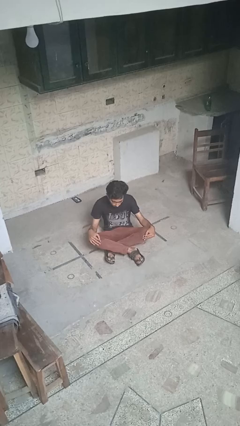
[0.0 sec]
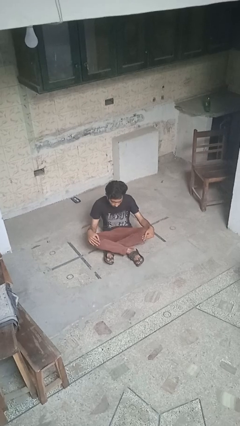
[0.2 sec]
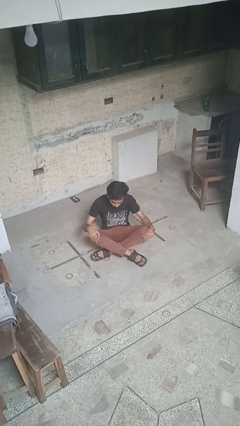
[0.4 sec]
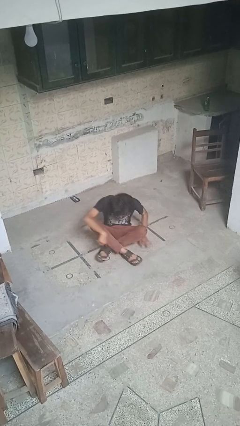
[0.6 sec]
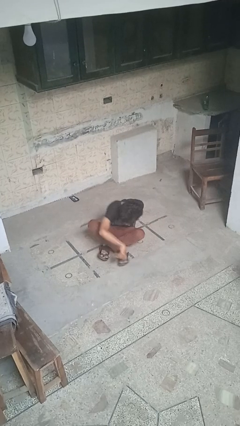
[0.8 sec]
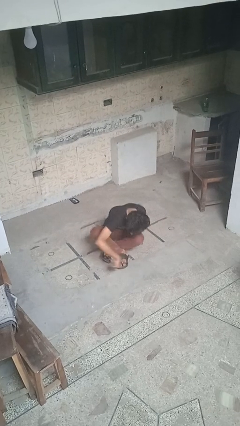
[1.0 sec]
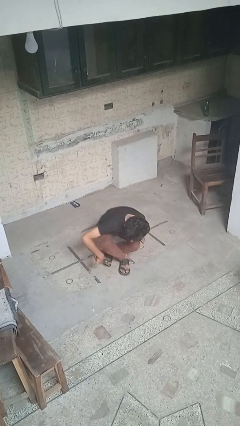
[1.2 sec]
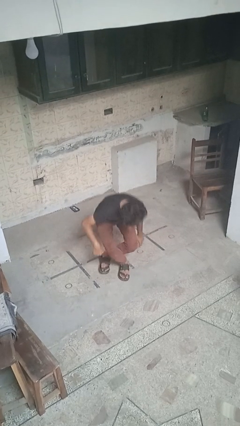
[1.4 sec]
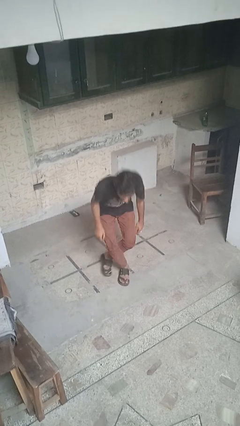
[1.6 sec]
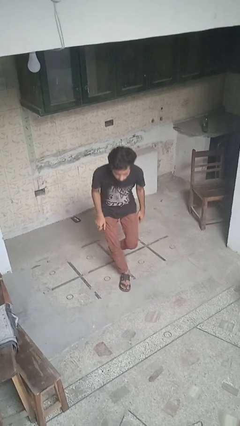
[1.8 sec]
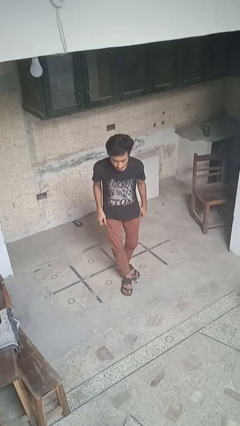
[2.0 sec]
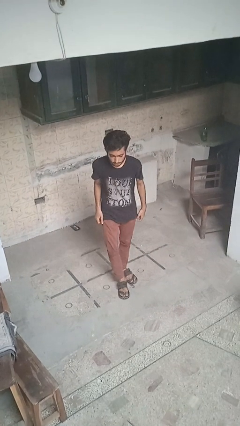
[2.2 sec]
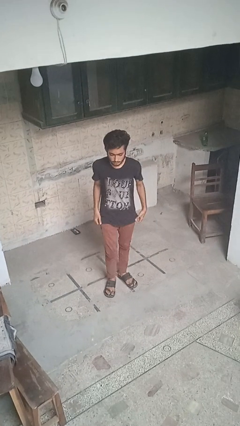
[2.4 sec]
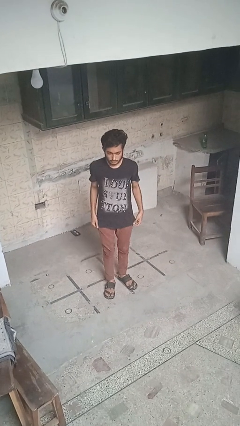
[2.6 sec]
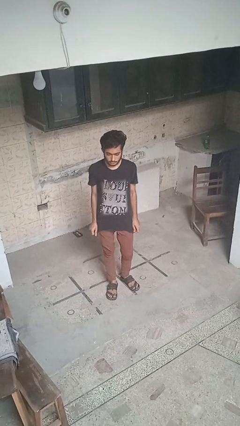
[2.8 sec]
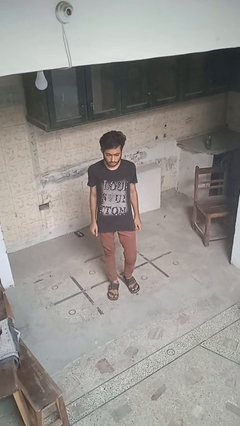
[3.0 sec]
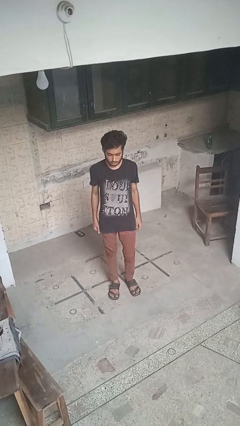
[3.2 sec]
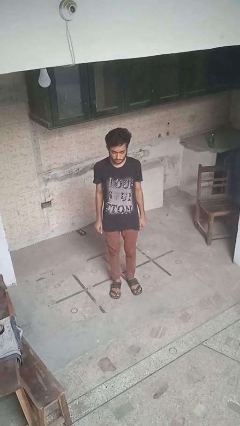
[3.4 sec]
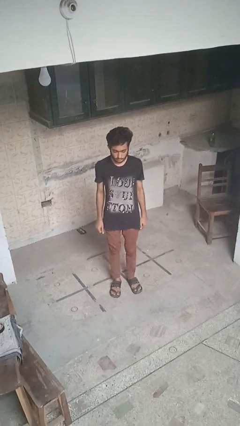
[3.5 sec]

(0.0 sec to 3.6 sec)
person stands up from floor

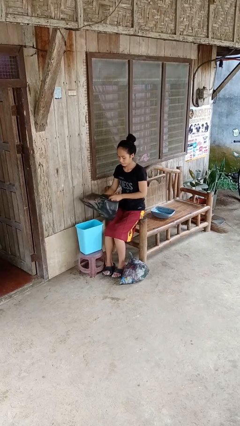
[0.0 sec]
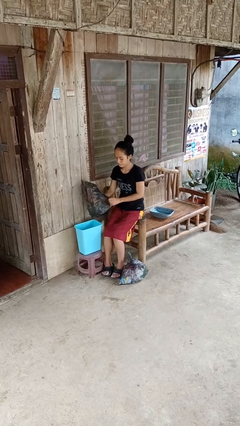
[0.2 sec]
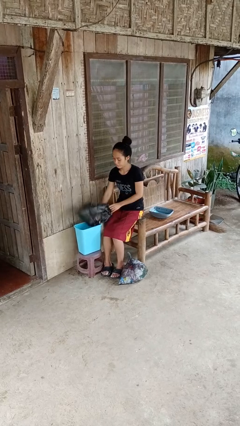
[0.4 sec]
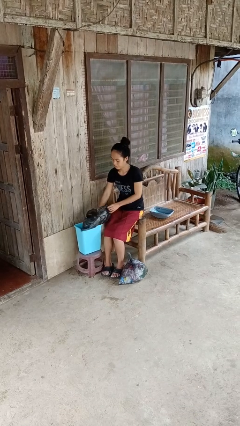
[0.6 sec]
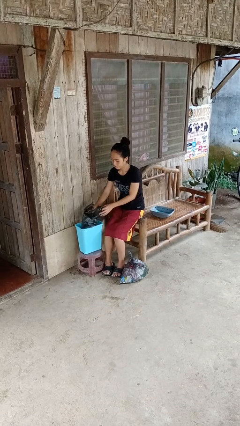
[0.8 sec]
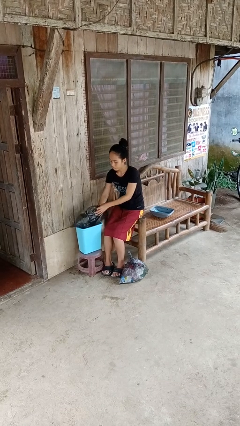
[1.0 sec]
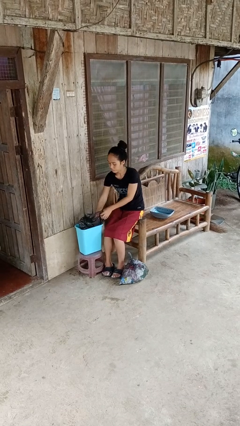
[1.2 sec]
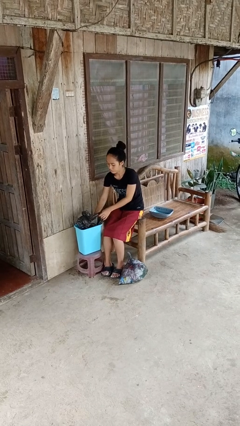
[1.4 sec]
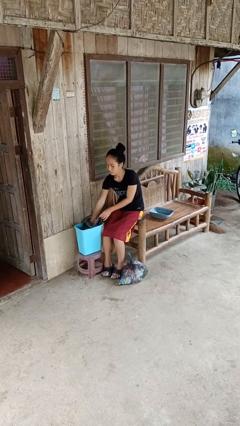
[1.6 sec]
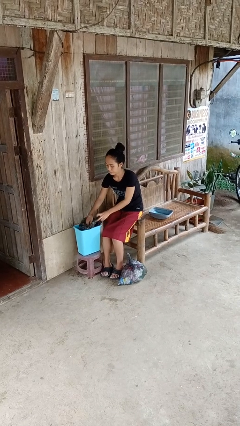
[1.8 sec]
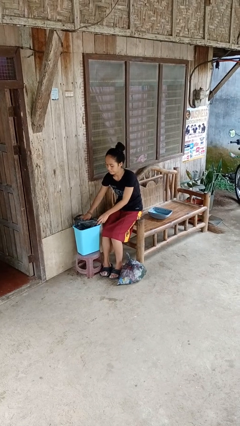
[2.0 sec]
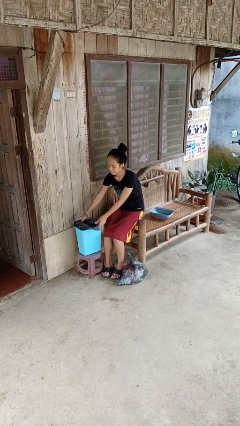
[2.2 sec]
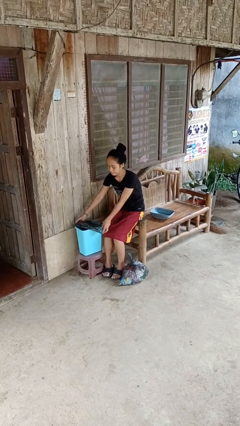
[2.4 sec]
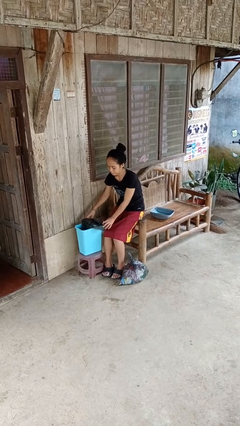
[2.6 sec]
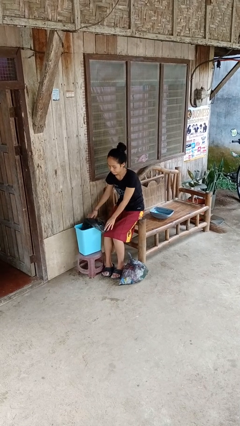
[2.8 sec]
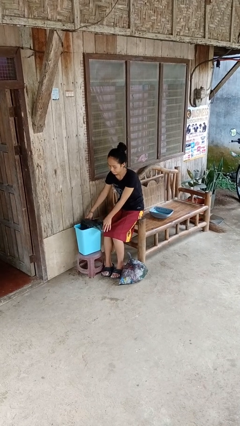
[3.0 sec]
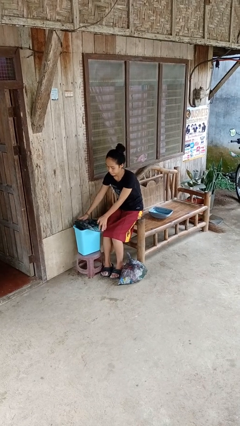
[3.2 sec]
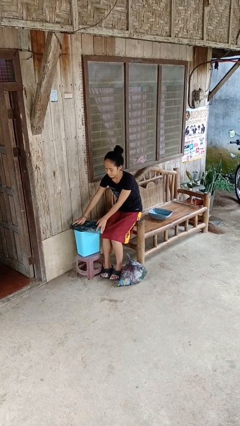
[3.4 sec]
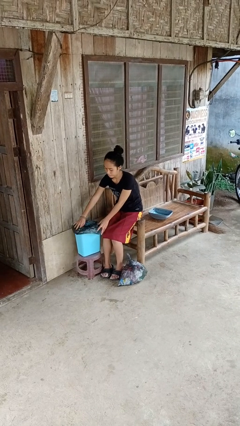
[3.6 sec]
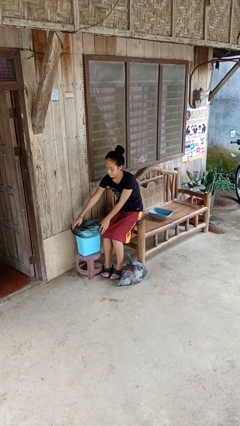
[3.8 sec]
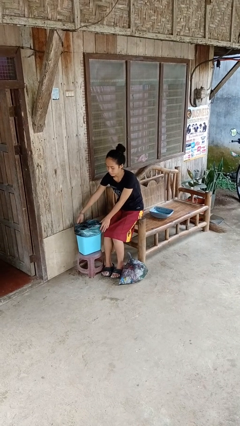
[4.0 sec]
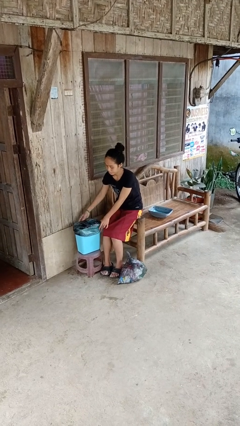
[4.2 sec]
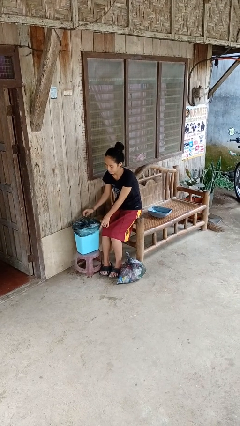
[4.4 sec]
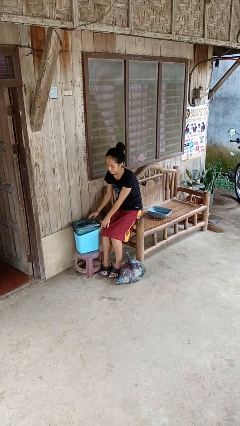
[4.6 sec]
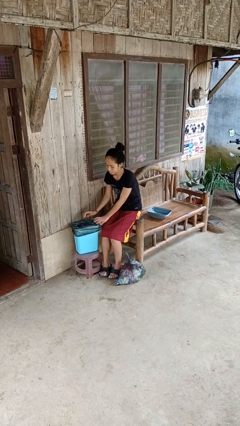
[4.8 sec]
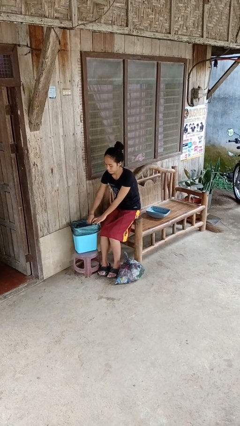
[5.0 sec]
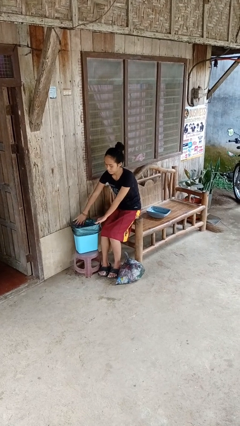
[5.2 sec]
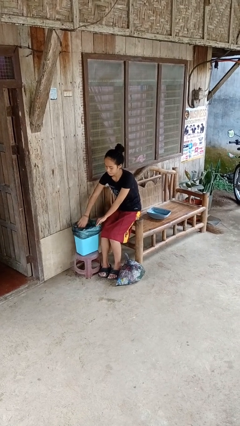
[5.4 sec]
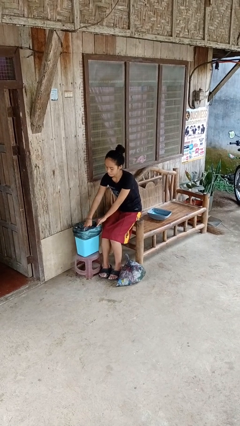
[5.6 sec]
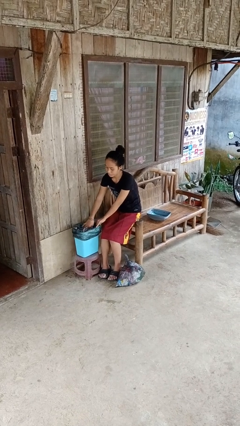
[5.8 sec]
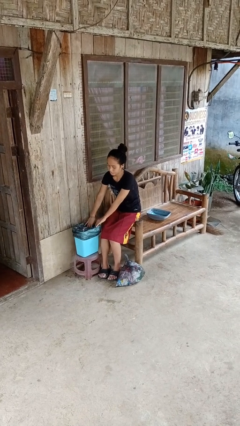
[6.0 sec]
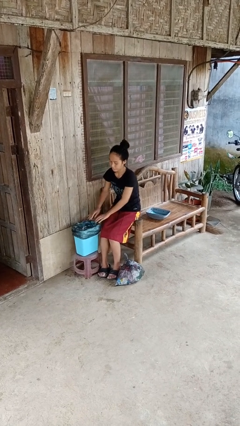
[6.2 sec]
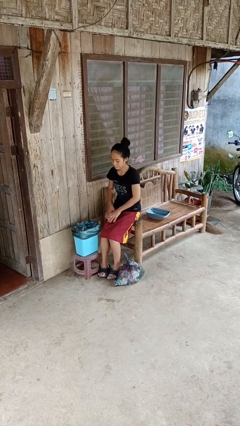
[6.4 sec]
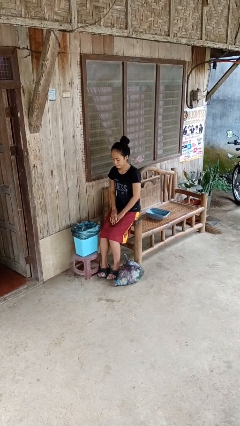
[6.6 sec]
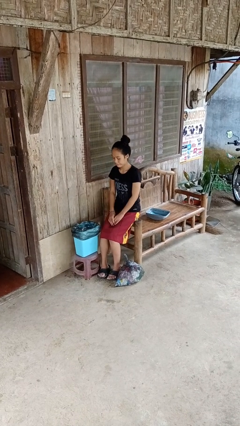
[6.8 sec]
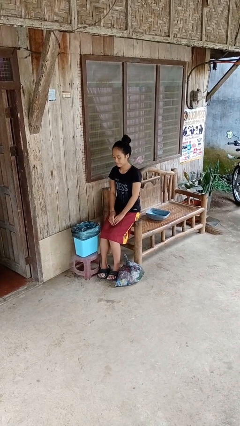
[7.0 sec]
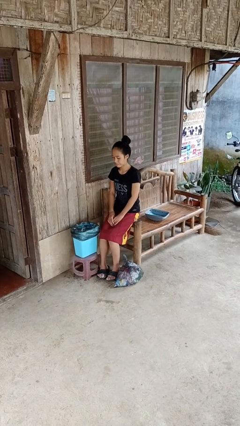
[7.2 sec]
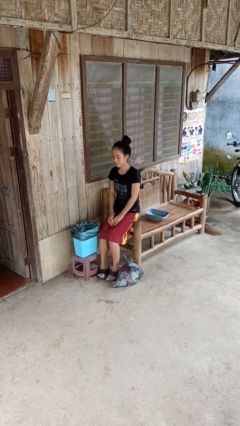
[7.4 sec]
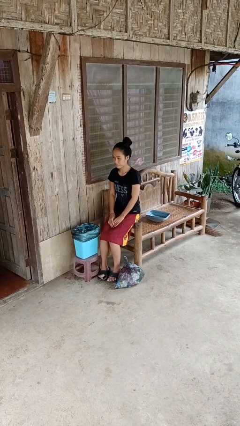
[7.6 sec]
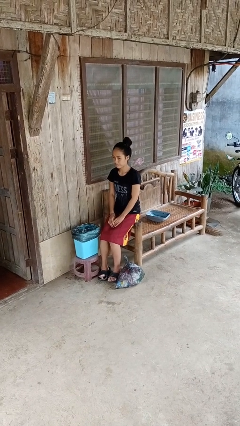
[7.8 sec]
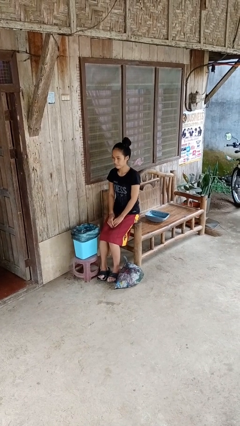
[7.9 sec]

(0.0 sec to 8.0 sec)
person inserts trashbag into trashcan

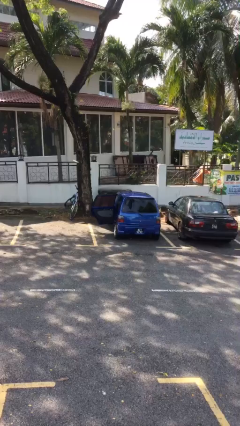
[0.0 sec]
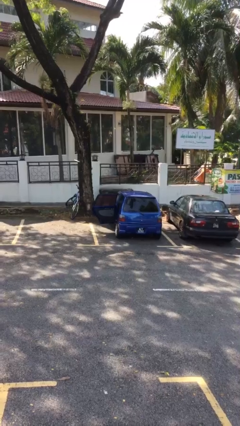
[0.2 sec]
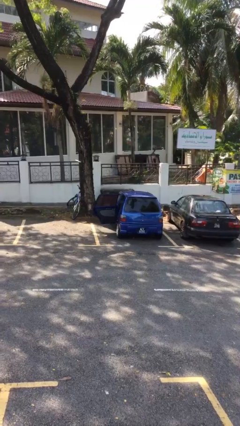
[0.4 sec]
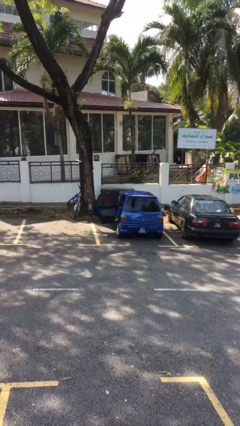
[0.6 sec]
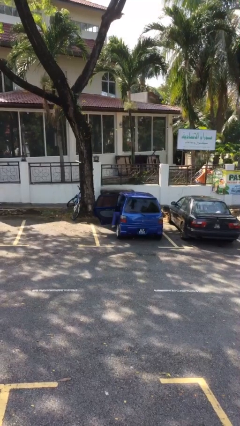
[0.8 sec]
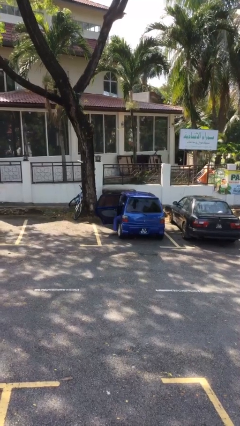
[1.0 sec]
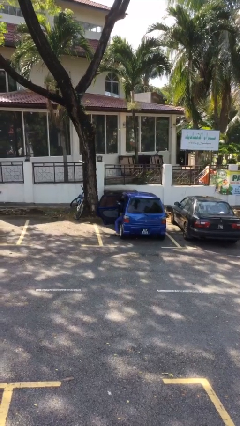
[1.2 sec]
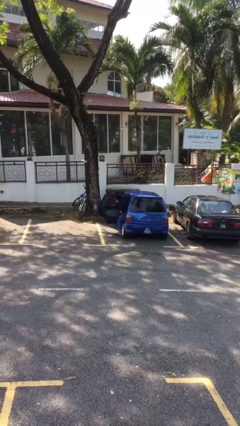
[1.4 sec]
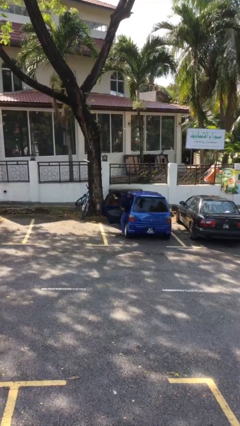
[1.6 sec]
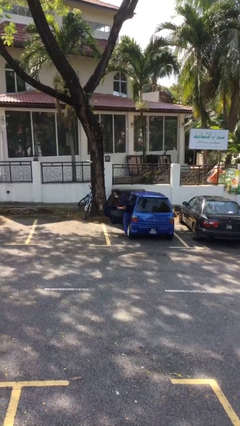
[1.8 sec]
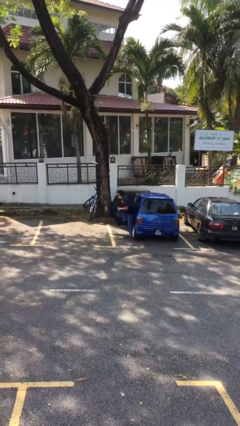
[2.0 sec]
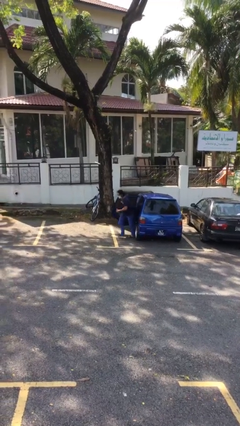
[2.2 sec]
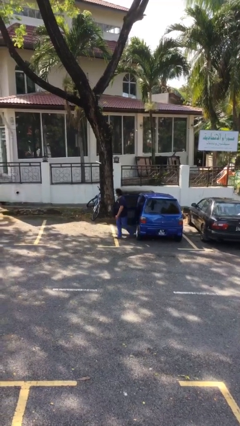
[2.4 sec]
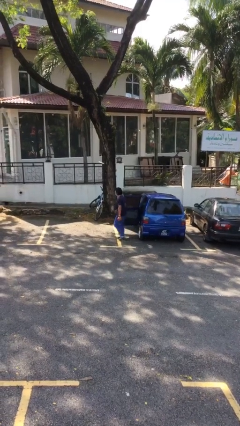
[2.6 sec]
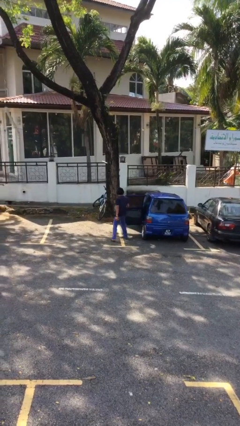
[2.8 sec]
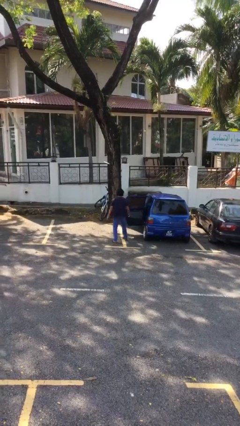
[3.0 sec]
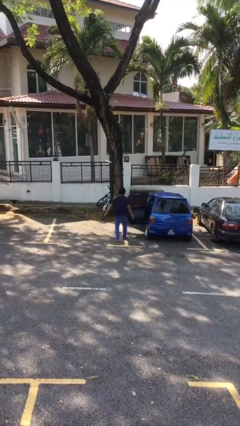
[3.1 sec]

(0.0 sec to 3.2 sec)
person exits car

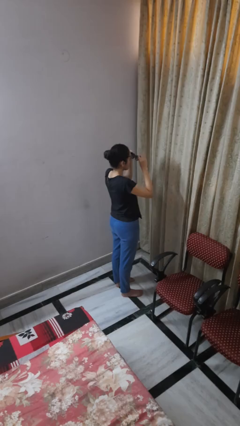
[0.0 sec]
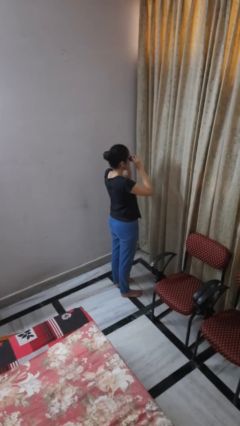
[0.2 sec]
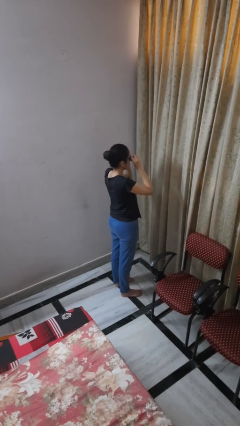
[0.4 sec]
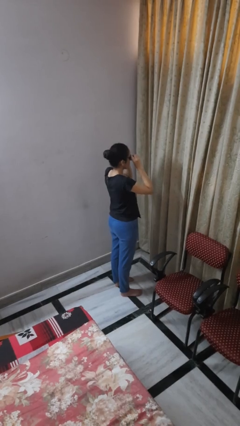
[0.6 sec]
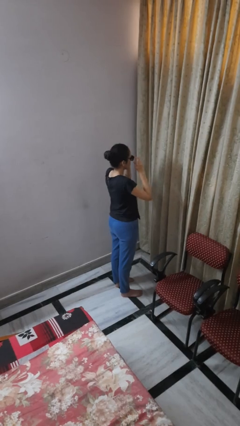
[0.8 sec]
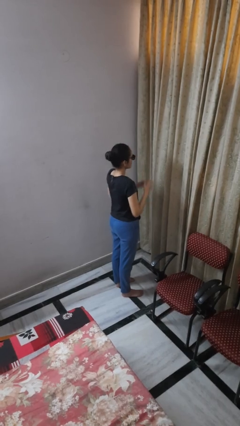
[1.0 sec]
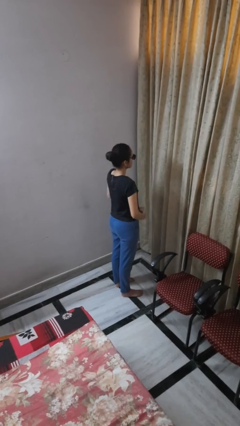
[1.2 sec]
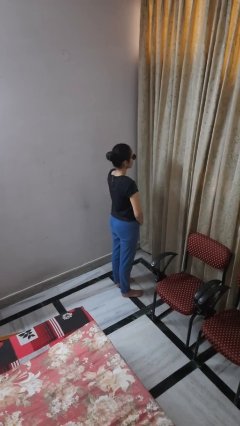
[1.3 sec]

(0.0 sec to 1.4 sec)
person puts on sunglasses

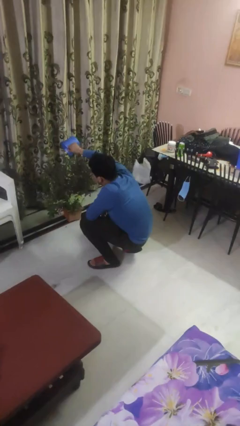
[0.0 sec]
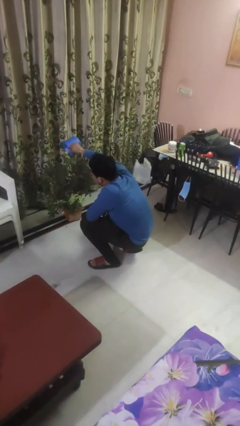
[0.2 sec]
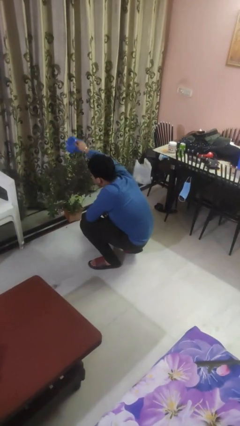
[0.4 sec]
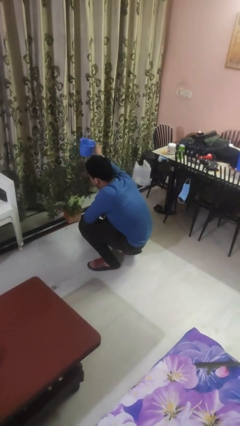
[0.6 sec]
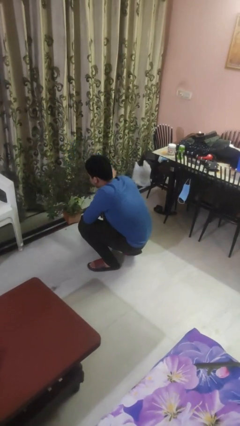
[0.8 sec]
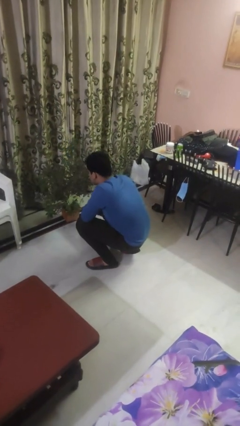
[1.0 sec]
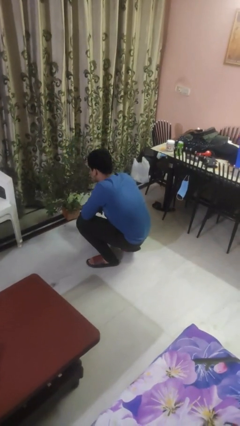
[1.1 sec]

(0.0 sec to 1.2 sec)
person waters houseplant

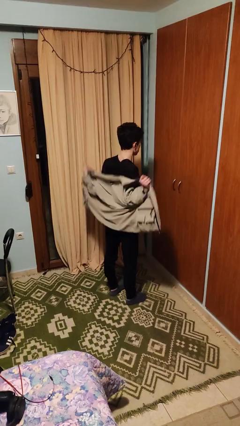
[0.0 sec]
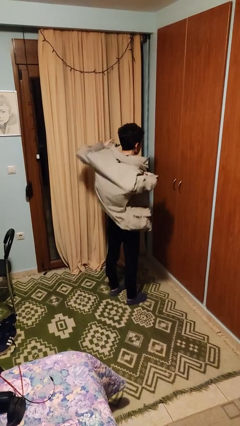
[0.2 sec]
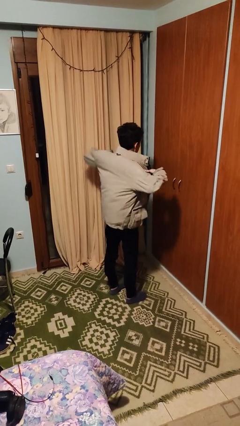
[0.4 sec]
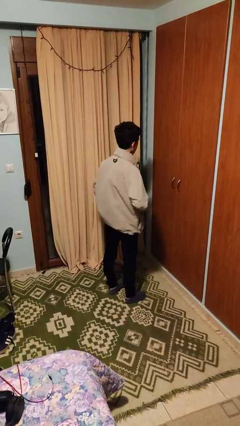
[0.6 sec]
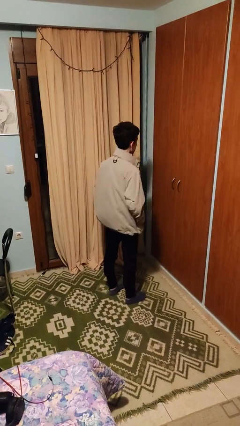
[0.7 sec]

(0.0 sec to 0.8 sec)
person puts on jacket
